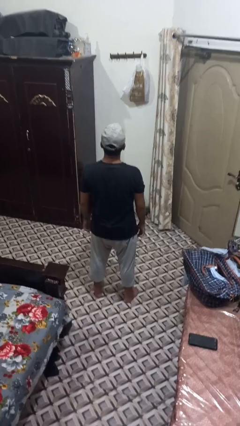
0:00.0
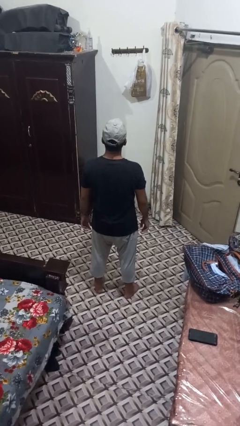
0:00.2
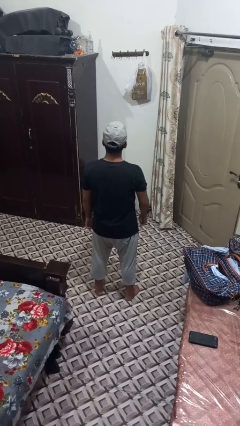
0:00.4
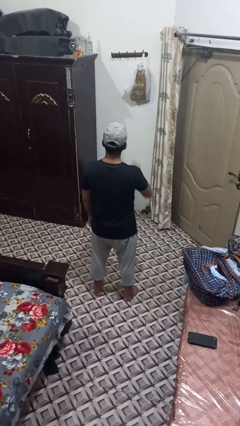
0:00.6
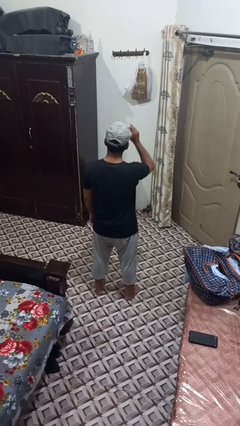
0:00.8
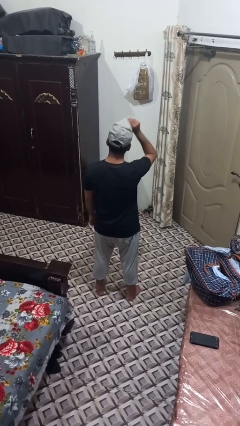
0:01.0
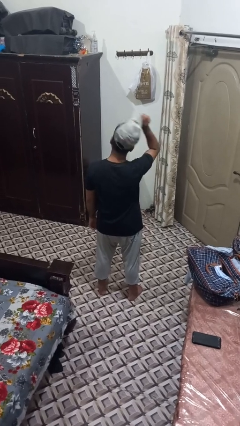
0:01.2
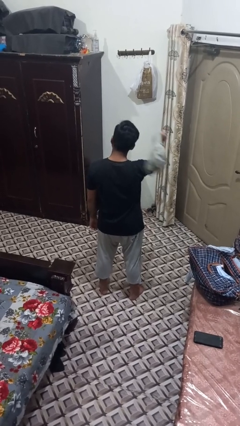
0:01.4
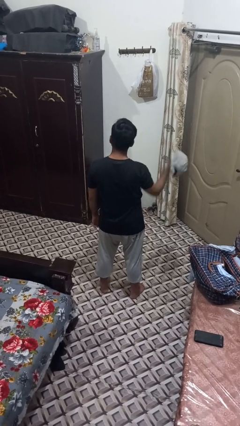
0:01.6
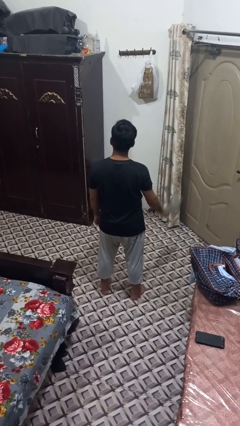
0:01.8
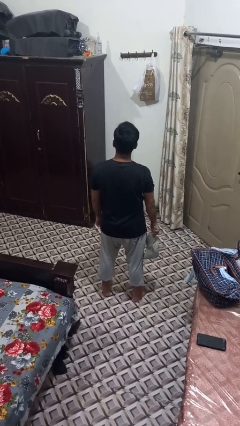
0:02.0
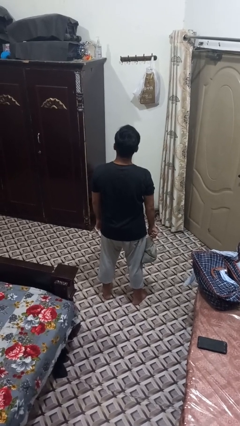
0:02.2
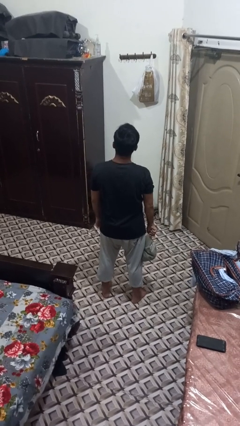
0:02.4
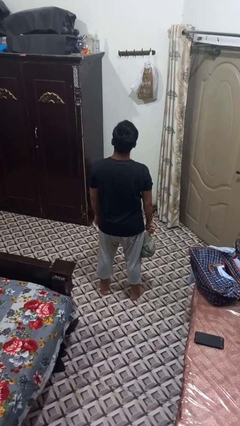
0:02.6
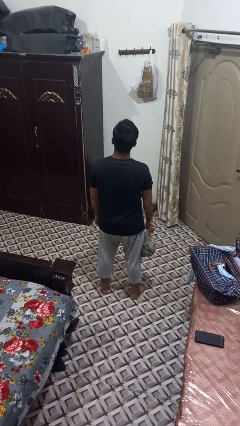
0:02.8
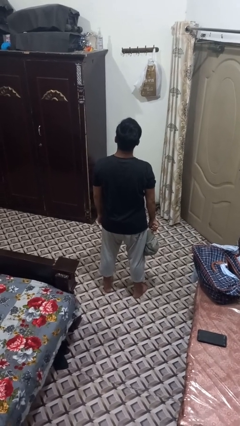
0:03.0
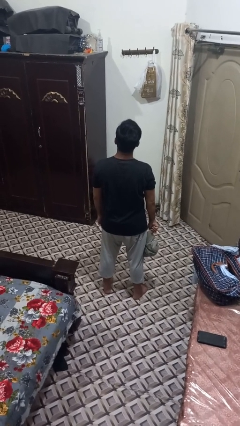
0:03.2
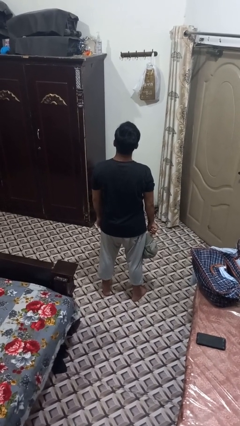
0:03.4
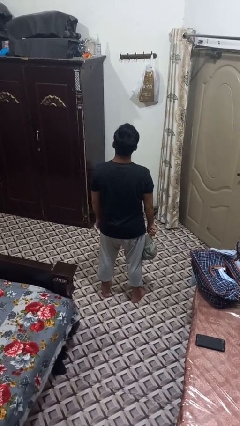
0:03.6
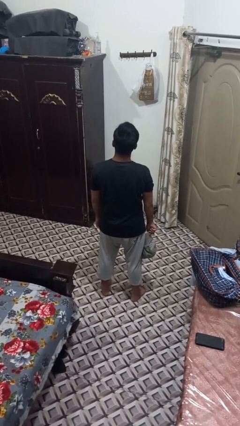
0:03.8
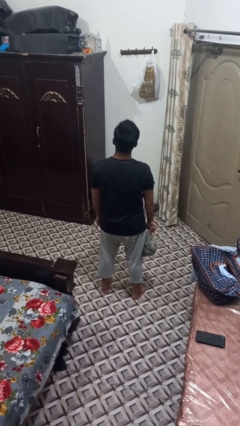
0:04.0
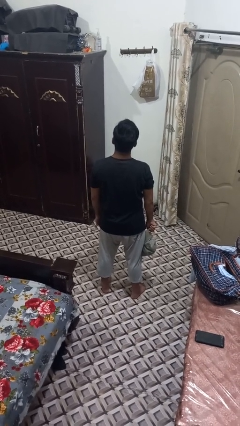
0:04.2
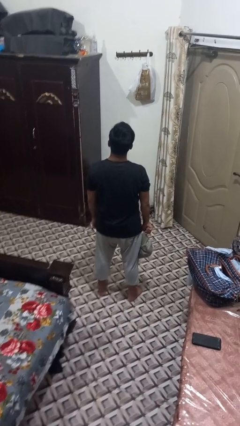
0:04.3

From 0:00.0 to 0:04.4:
person takes off hat

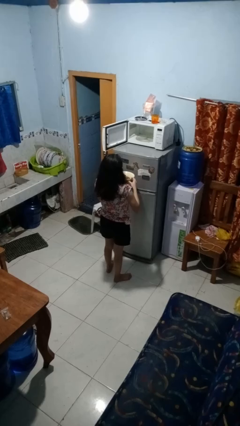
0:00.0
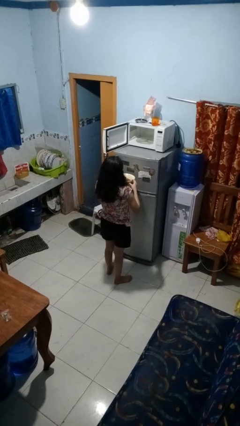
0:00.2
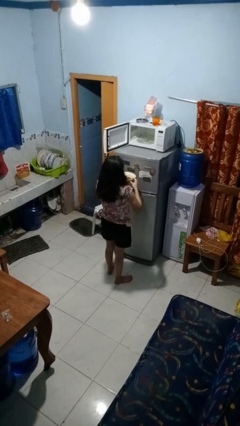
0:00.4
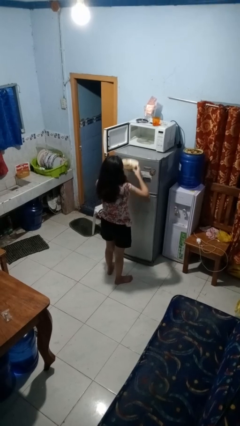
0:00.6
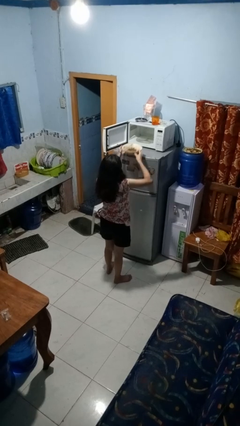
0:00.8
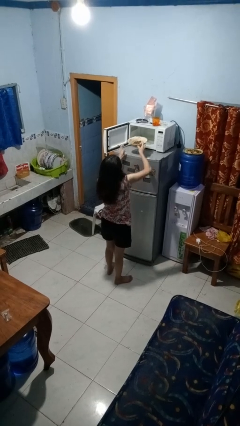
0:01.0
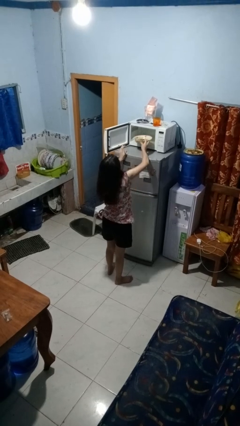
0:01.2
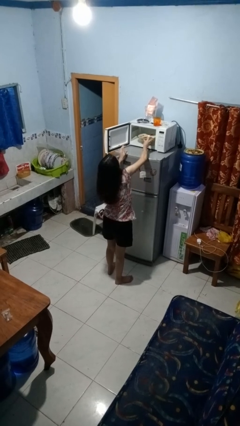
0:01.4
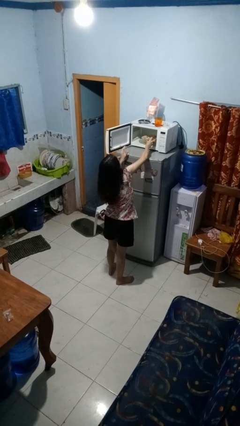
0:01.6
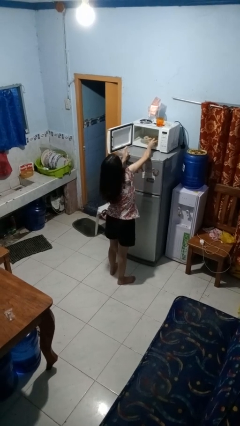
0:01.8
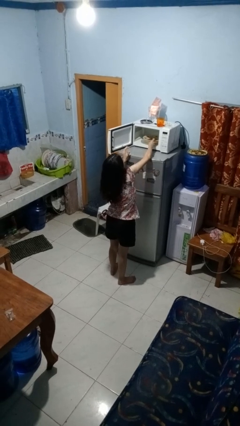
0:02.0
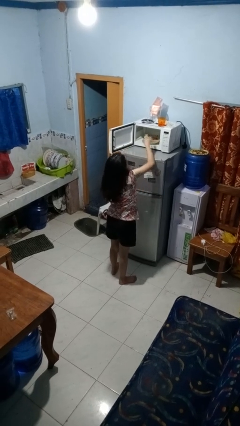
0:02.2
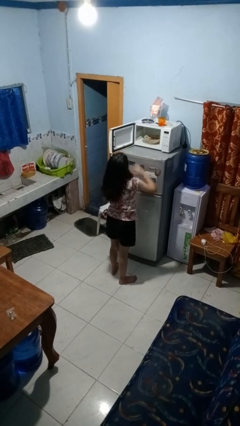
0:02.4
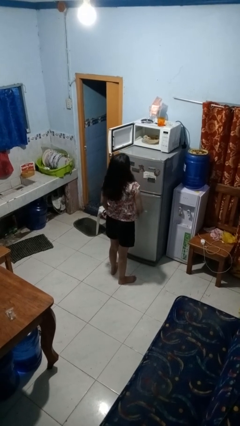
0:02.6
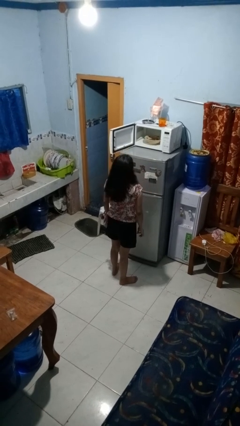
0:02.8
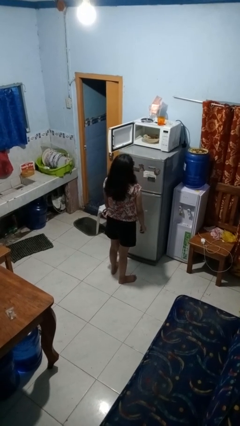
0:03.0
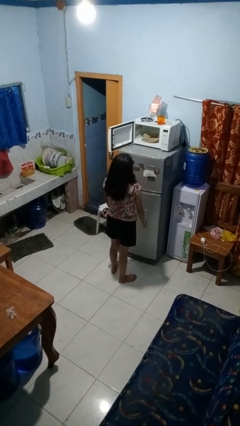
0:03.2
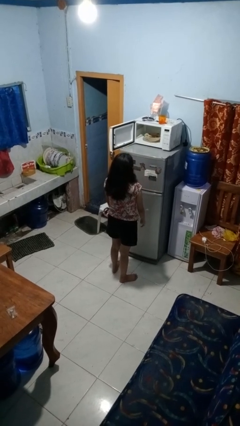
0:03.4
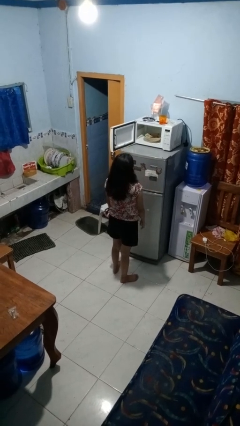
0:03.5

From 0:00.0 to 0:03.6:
person puts object into microwave

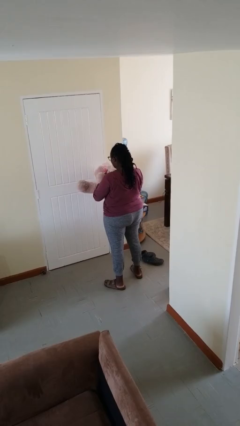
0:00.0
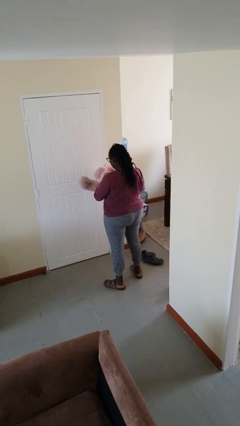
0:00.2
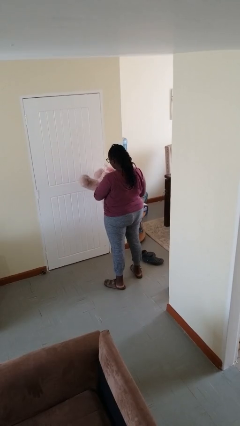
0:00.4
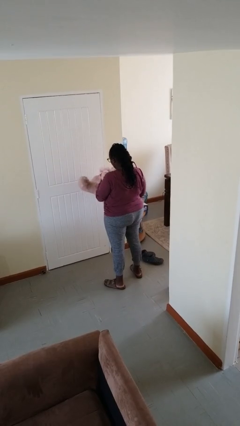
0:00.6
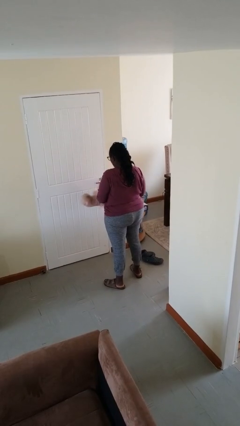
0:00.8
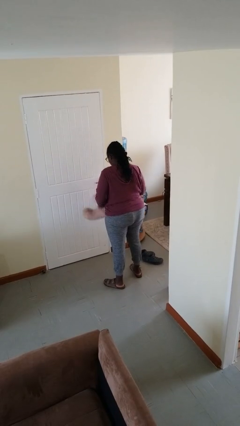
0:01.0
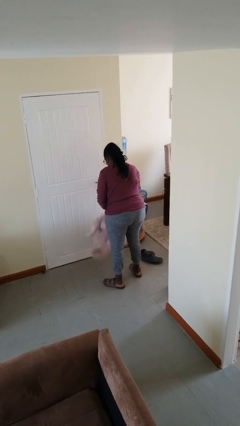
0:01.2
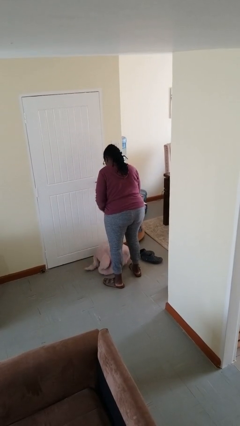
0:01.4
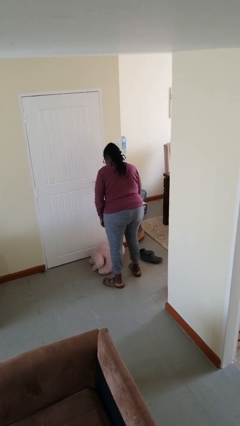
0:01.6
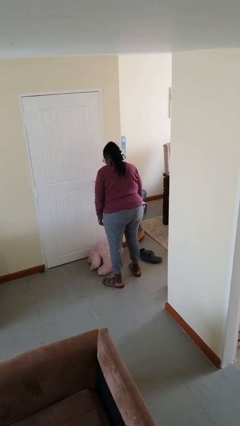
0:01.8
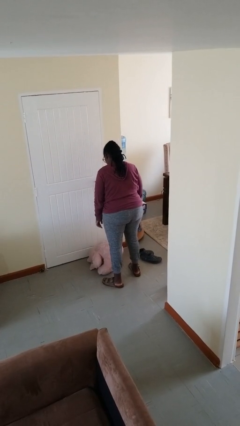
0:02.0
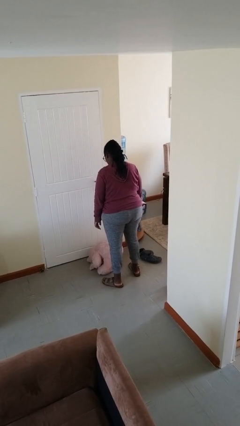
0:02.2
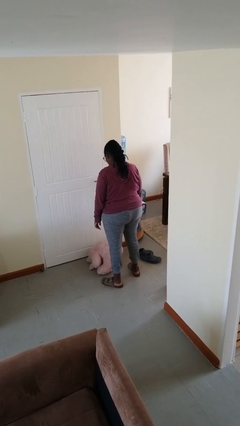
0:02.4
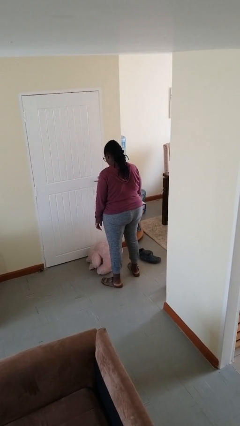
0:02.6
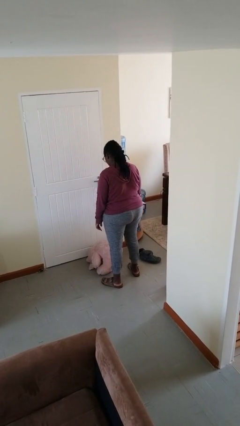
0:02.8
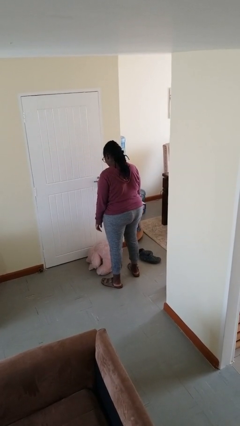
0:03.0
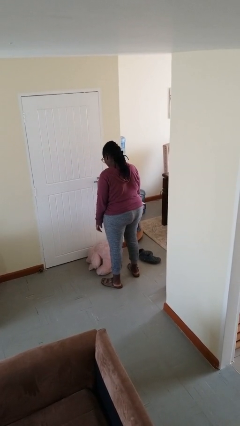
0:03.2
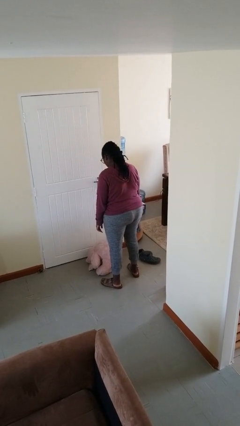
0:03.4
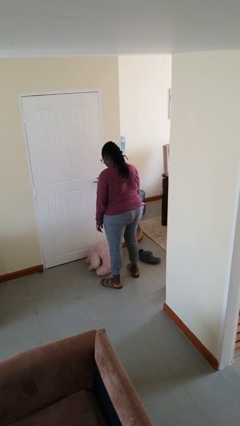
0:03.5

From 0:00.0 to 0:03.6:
person drops object

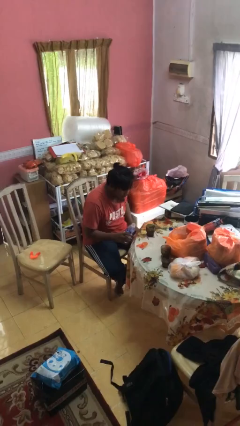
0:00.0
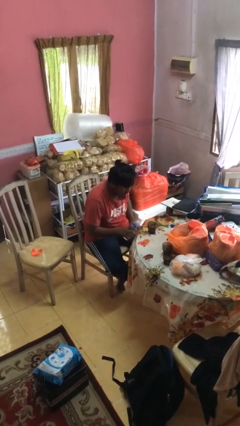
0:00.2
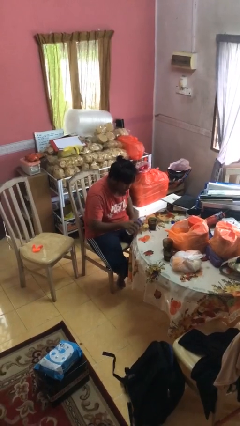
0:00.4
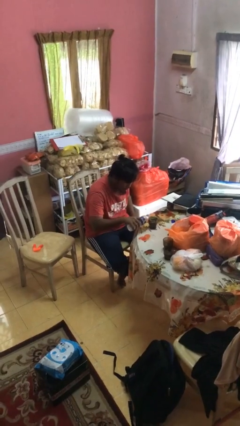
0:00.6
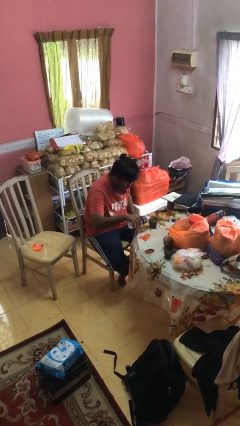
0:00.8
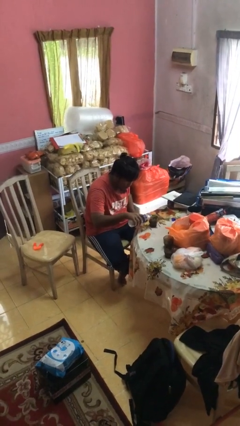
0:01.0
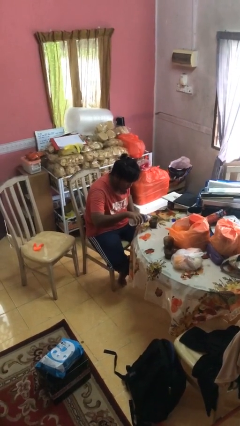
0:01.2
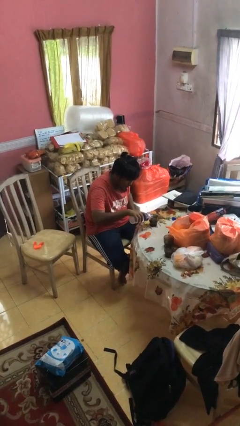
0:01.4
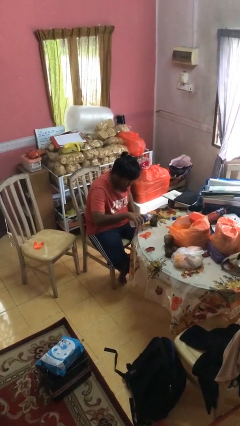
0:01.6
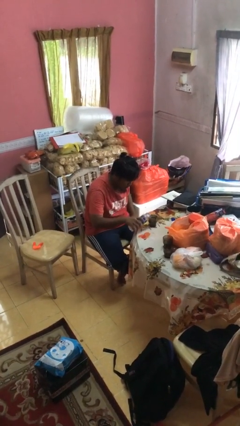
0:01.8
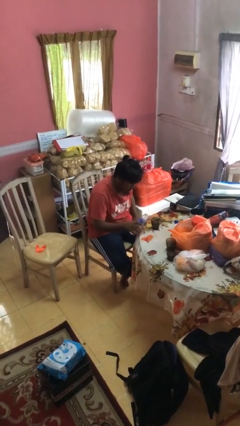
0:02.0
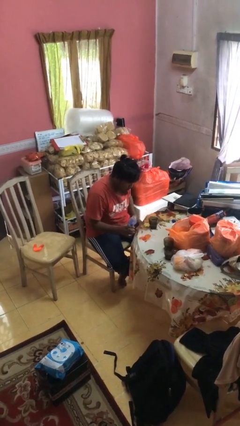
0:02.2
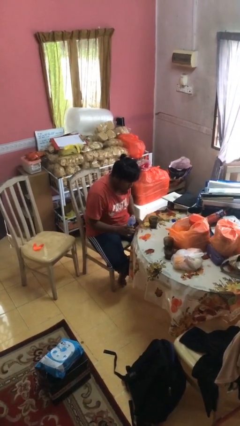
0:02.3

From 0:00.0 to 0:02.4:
person pours liquid into cup

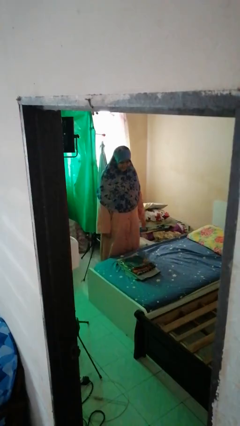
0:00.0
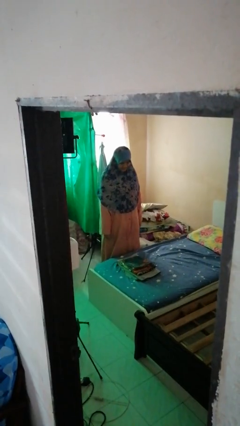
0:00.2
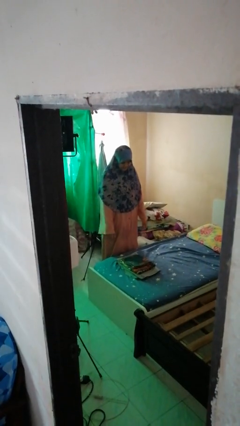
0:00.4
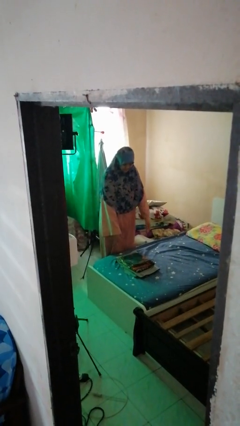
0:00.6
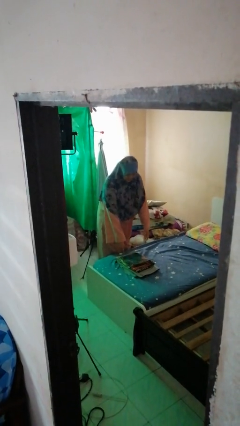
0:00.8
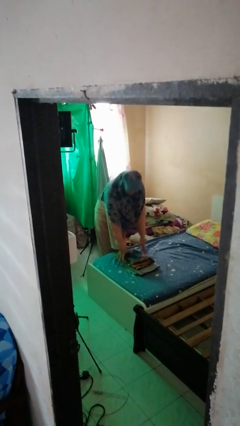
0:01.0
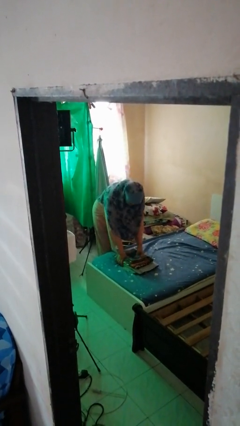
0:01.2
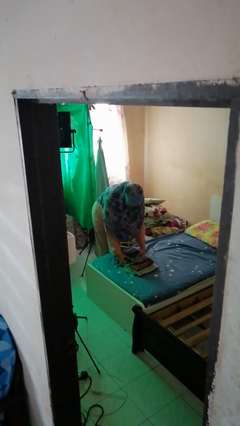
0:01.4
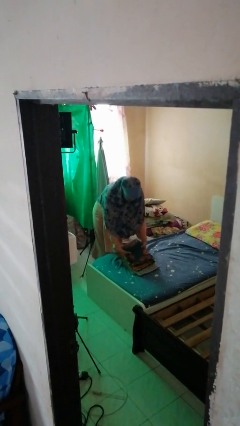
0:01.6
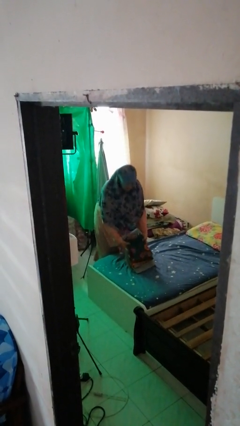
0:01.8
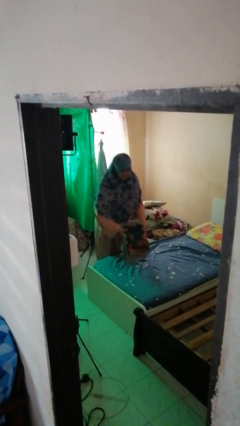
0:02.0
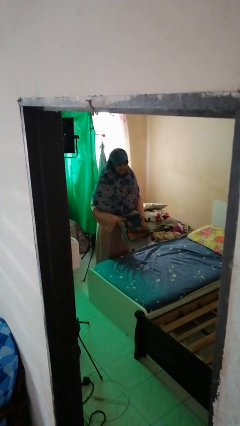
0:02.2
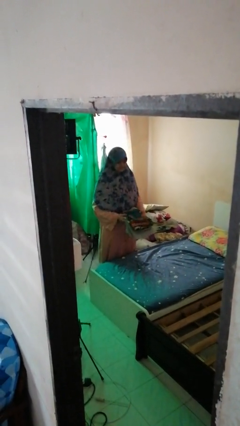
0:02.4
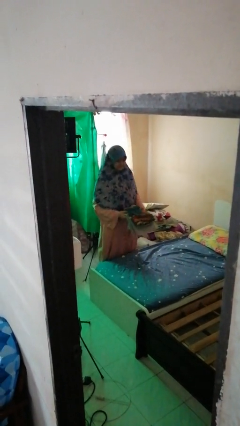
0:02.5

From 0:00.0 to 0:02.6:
person picks up object from bed

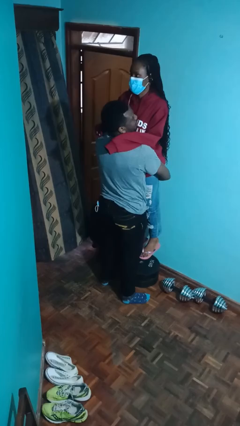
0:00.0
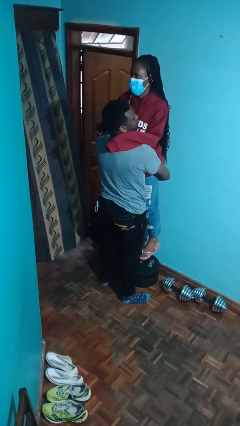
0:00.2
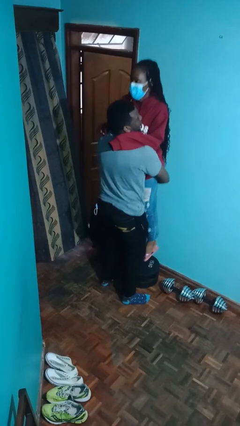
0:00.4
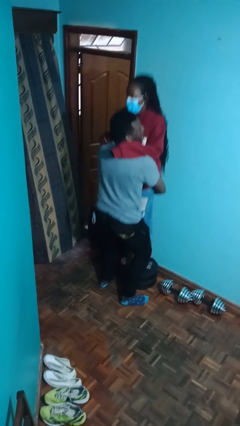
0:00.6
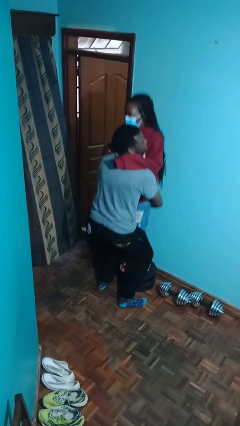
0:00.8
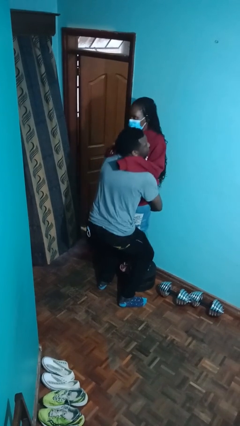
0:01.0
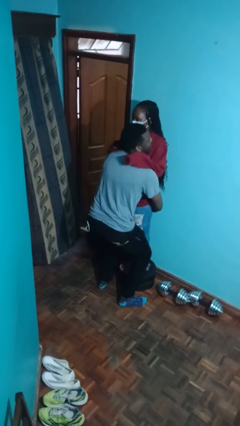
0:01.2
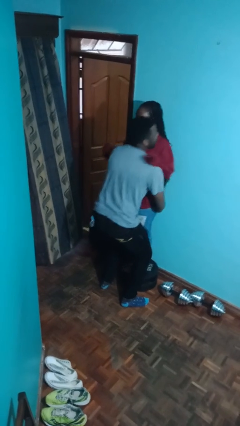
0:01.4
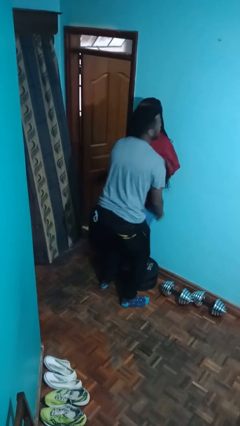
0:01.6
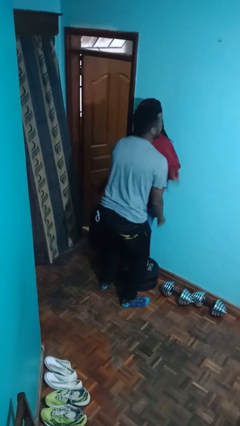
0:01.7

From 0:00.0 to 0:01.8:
person puts down person
